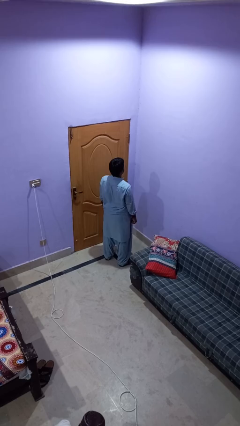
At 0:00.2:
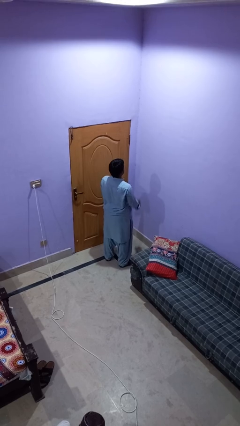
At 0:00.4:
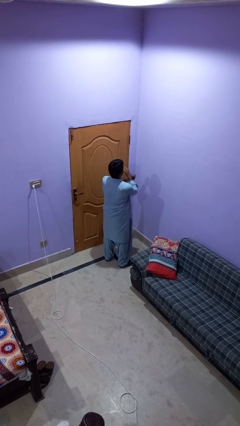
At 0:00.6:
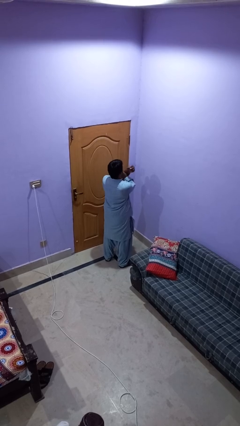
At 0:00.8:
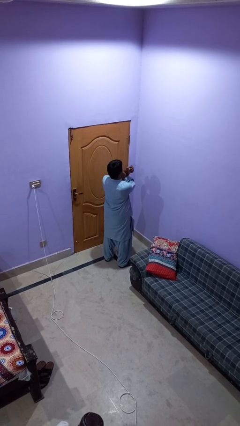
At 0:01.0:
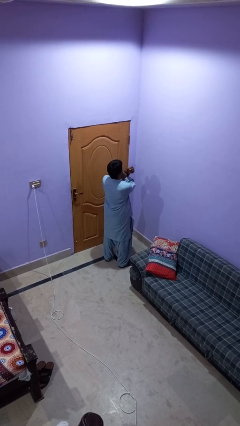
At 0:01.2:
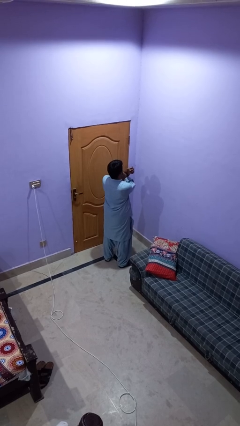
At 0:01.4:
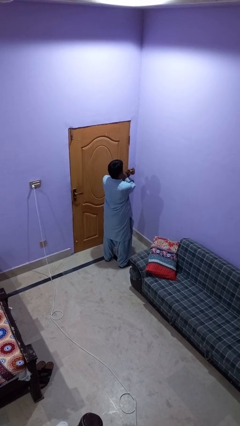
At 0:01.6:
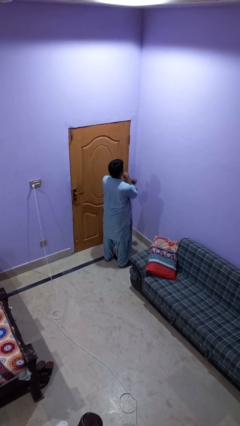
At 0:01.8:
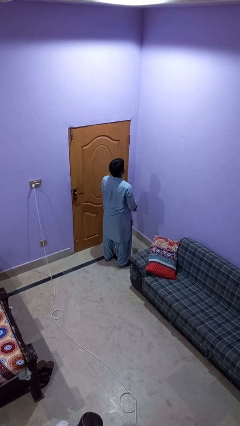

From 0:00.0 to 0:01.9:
person gestures arms x

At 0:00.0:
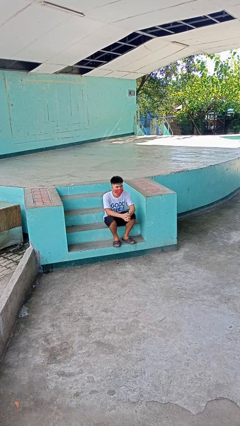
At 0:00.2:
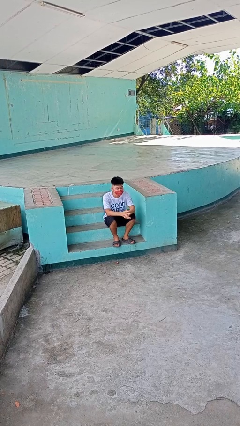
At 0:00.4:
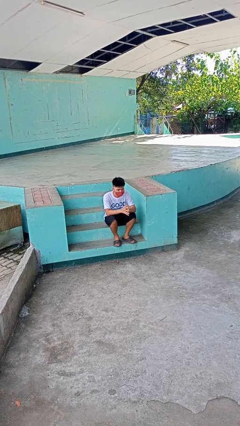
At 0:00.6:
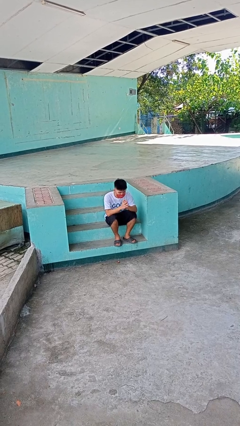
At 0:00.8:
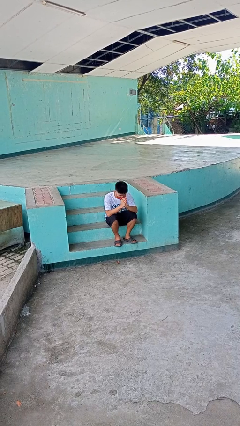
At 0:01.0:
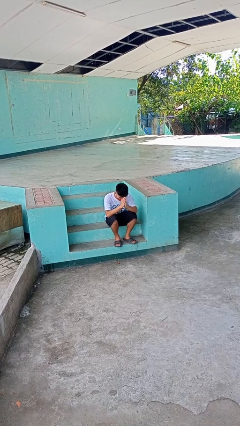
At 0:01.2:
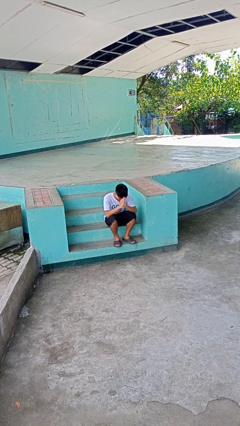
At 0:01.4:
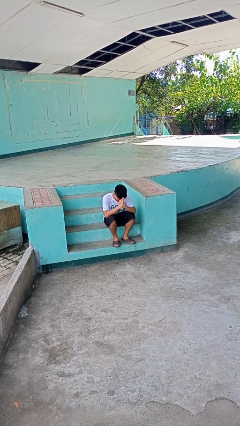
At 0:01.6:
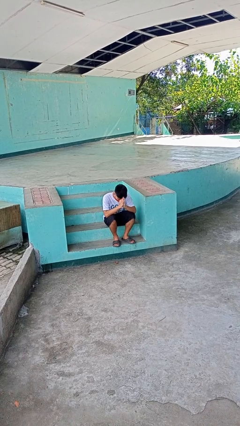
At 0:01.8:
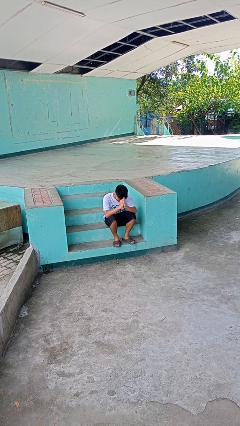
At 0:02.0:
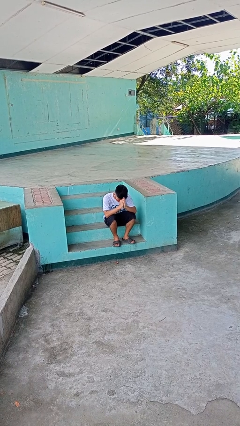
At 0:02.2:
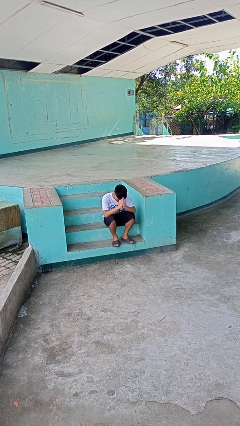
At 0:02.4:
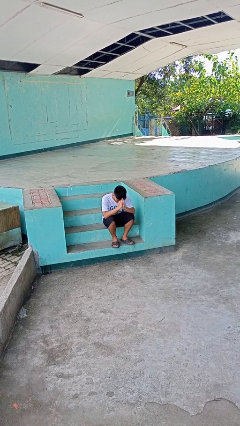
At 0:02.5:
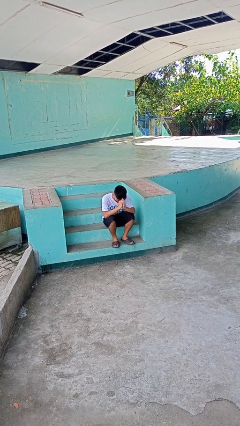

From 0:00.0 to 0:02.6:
person prays

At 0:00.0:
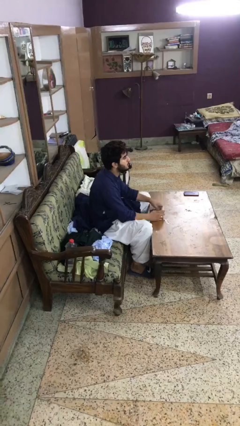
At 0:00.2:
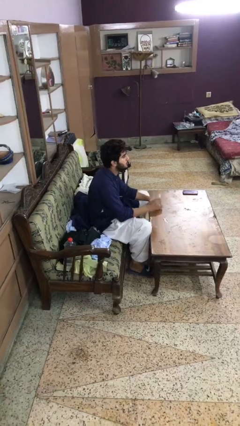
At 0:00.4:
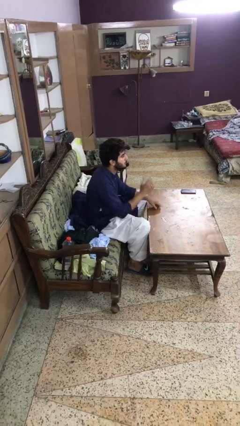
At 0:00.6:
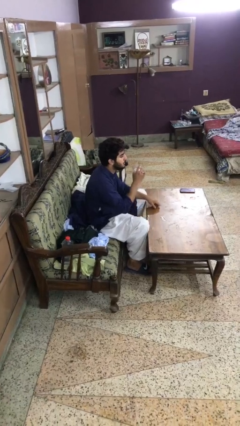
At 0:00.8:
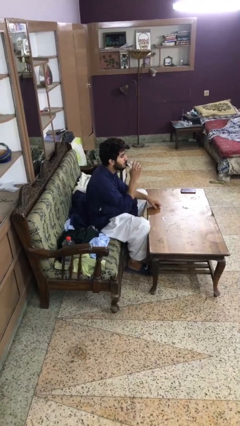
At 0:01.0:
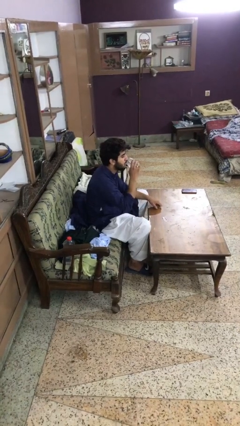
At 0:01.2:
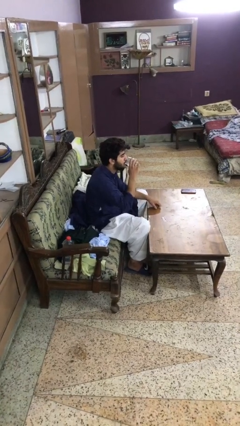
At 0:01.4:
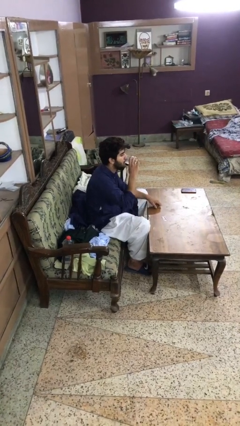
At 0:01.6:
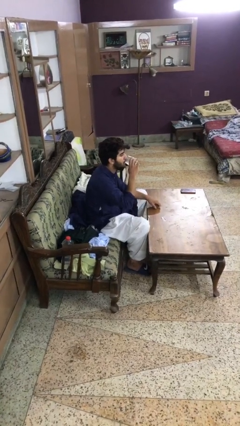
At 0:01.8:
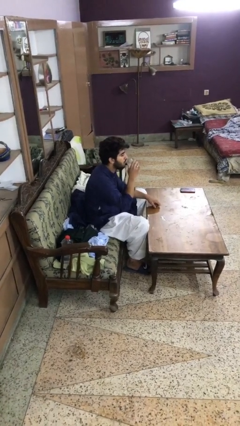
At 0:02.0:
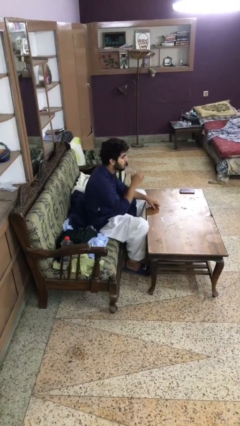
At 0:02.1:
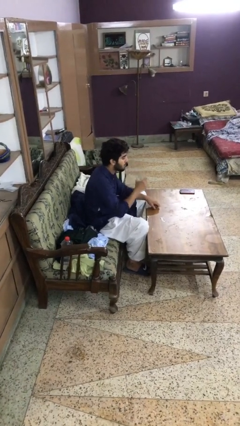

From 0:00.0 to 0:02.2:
person drinks from cup

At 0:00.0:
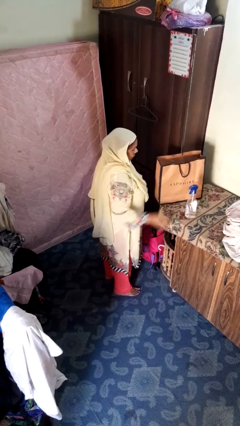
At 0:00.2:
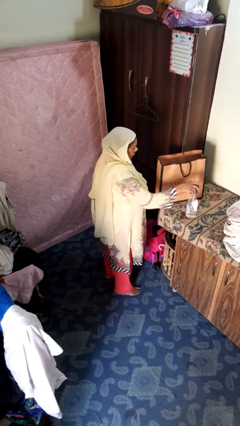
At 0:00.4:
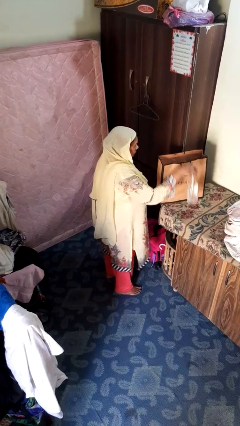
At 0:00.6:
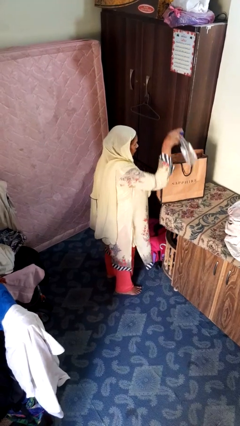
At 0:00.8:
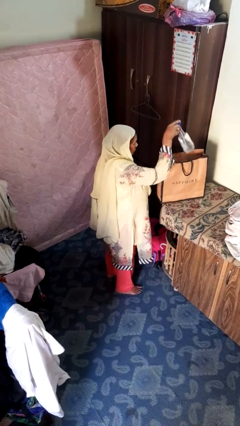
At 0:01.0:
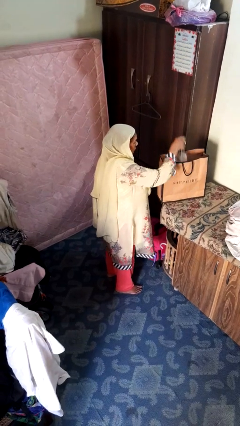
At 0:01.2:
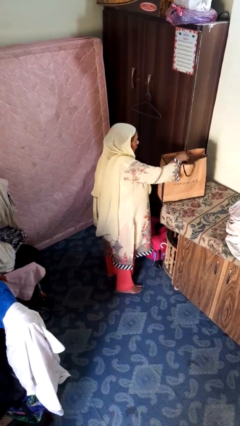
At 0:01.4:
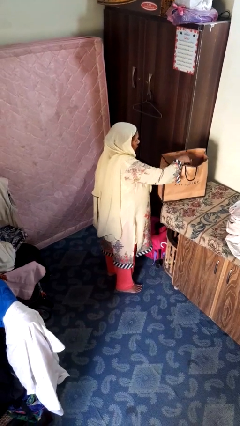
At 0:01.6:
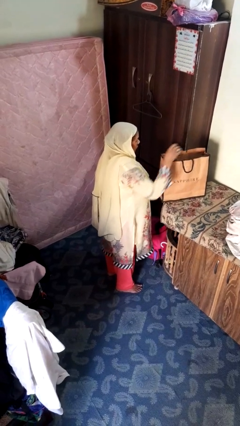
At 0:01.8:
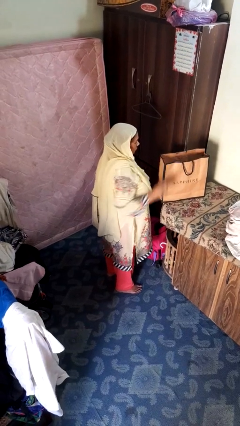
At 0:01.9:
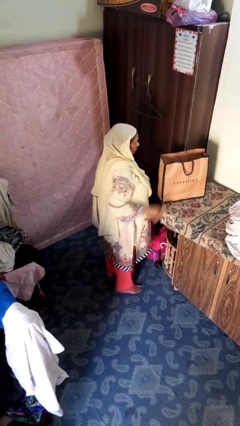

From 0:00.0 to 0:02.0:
person puts object into bag

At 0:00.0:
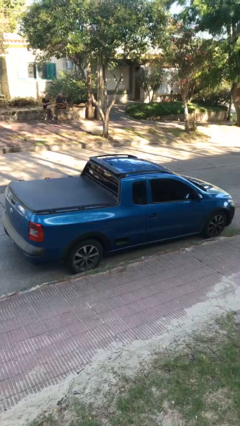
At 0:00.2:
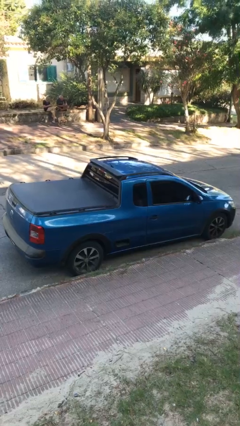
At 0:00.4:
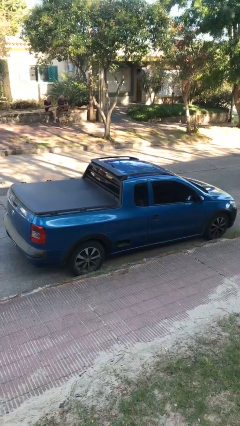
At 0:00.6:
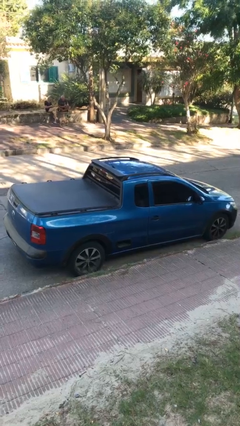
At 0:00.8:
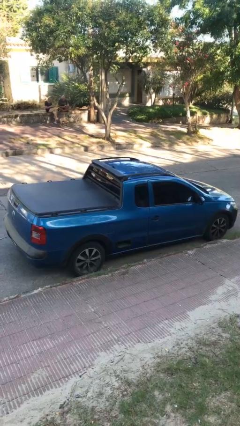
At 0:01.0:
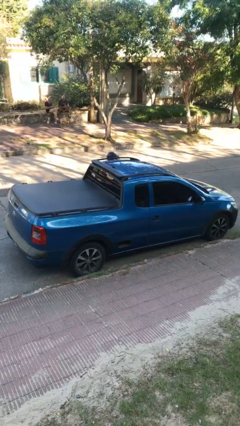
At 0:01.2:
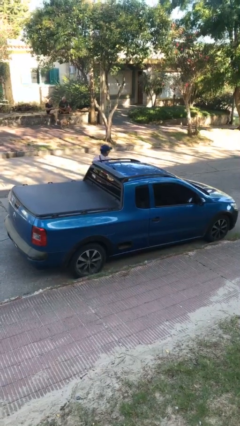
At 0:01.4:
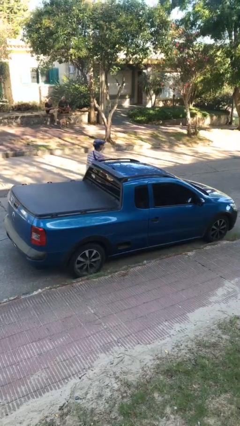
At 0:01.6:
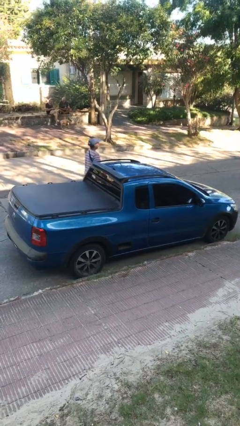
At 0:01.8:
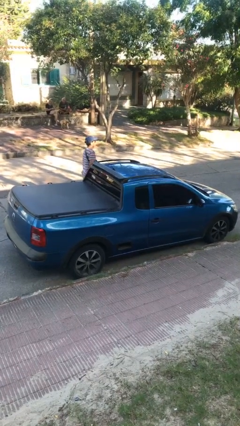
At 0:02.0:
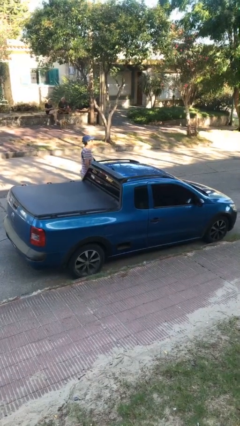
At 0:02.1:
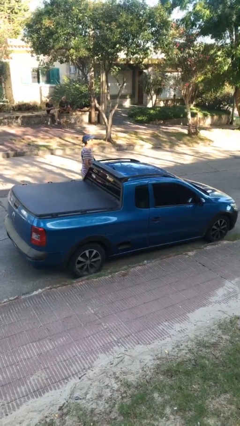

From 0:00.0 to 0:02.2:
car drops off person

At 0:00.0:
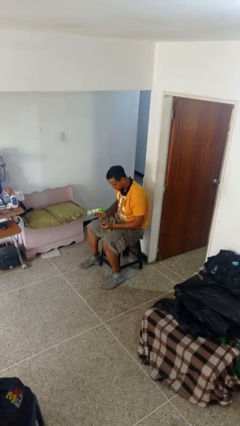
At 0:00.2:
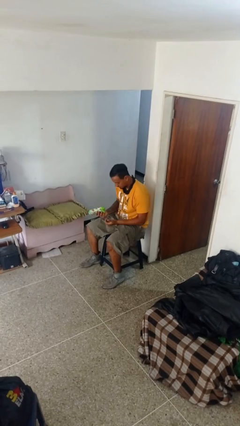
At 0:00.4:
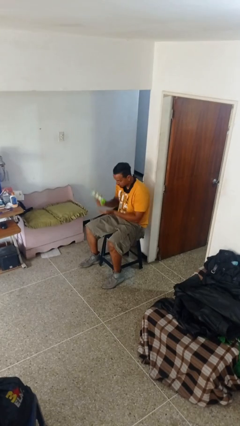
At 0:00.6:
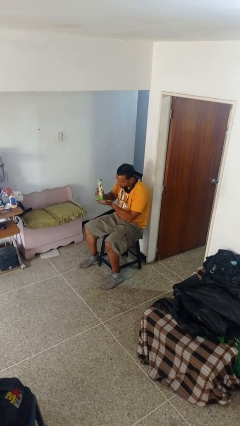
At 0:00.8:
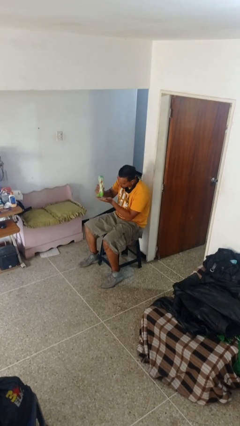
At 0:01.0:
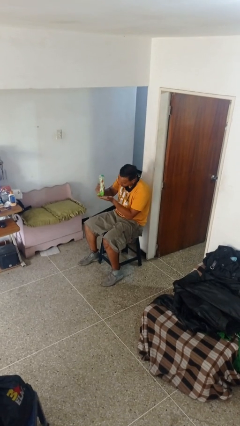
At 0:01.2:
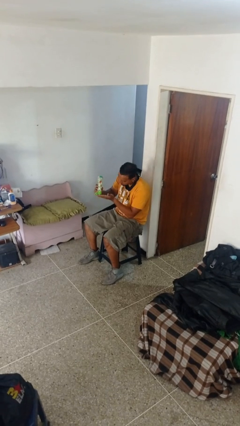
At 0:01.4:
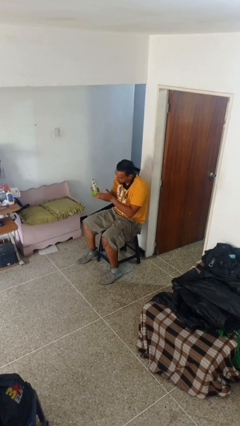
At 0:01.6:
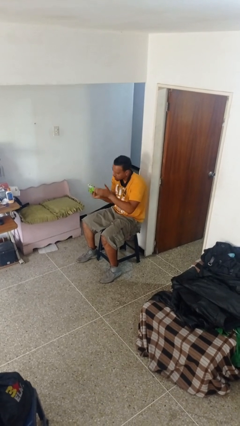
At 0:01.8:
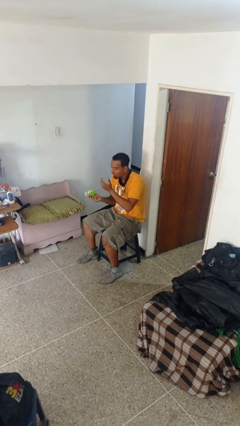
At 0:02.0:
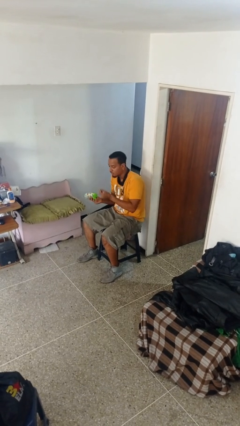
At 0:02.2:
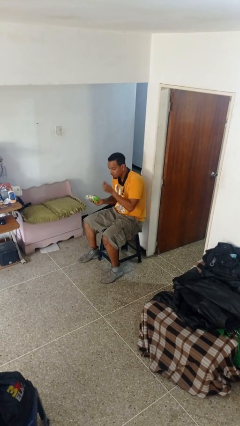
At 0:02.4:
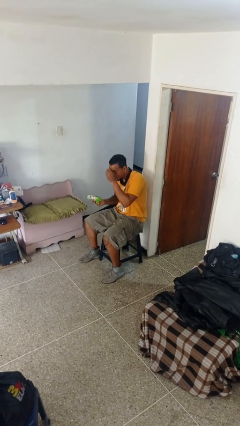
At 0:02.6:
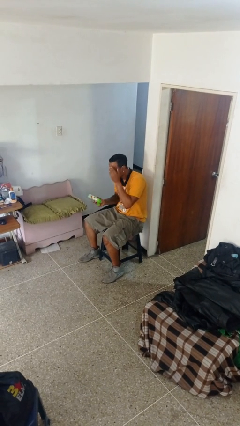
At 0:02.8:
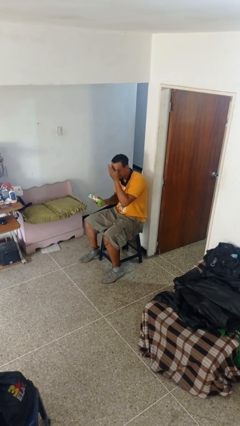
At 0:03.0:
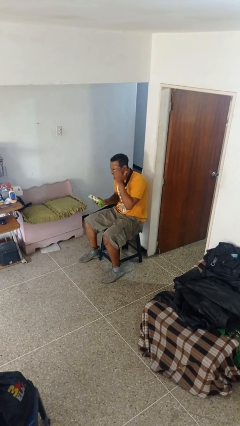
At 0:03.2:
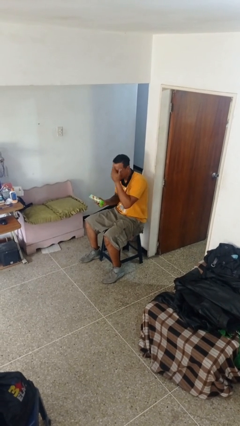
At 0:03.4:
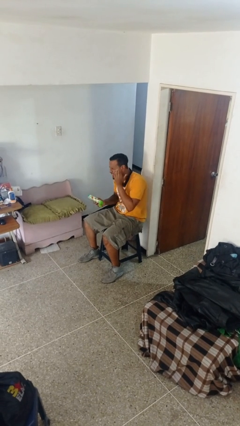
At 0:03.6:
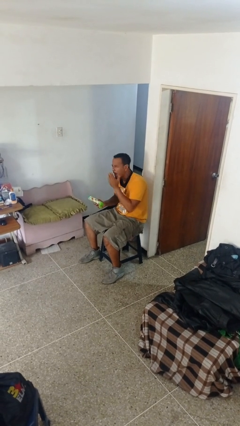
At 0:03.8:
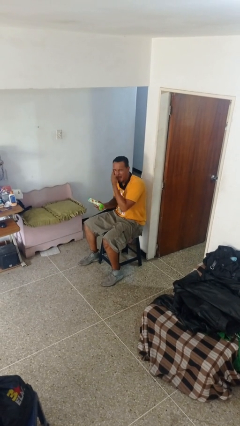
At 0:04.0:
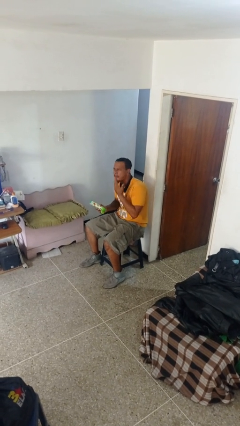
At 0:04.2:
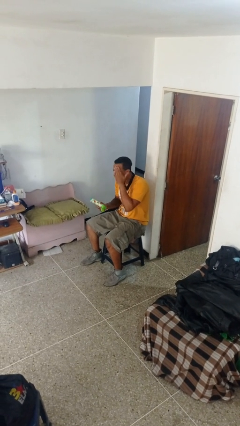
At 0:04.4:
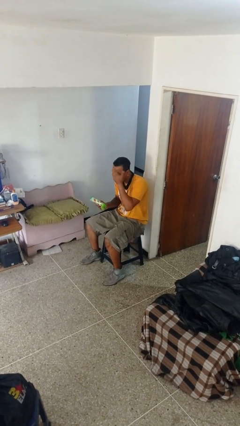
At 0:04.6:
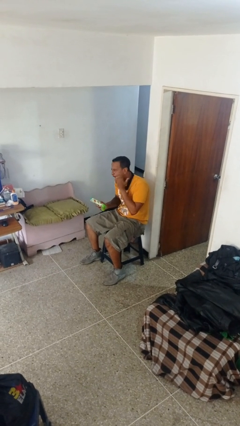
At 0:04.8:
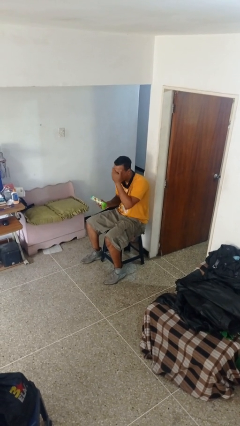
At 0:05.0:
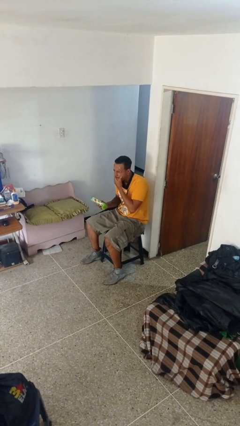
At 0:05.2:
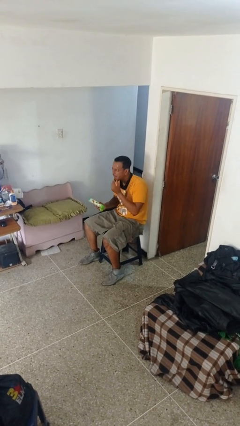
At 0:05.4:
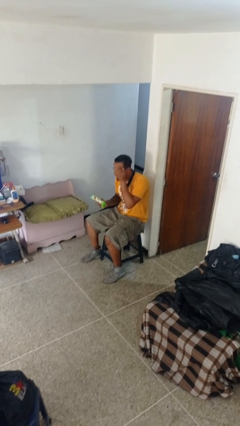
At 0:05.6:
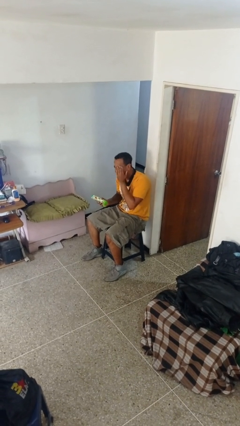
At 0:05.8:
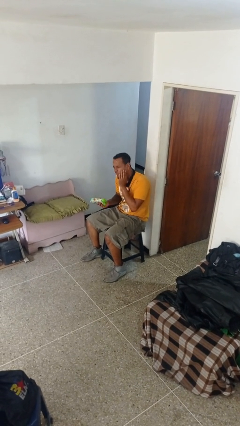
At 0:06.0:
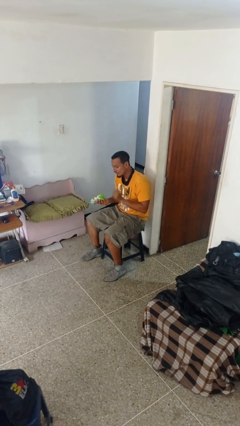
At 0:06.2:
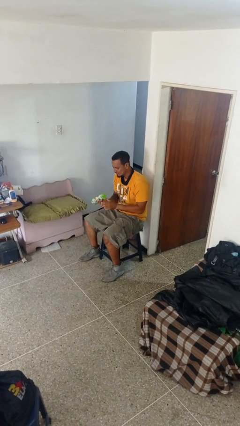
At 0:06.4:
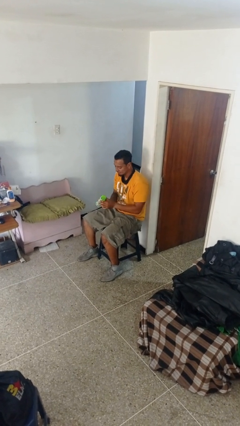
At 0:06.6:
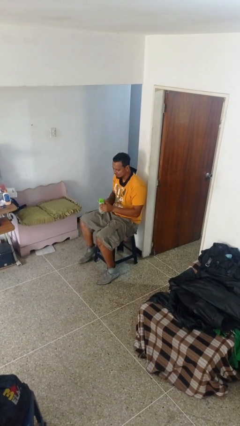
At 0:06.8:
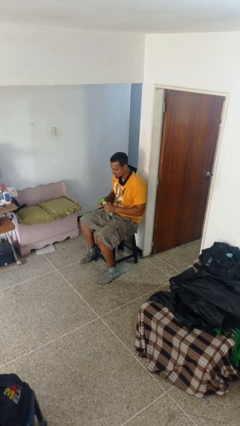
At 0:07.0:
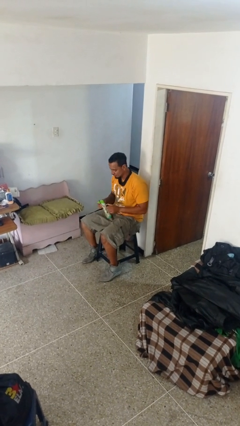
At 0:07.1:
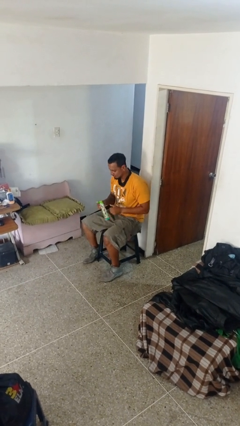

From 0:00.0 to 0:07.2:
person applies facial moisturizer
